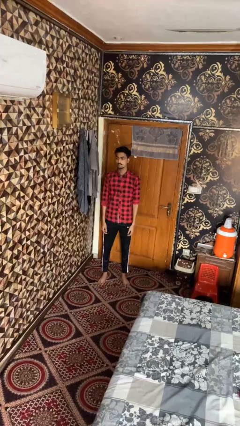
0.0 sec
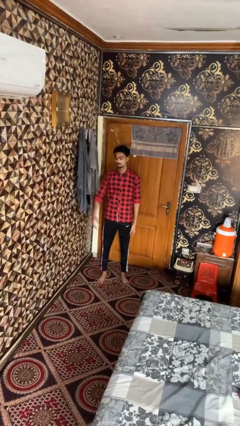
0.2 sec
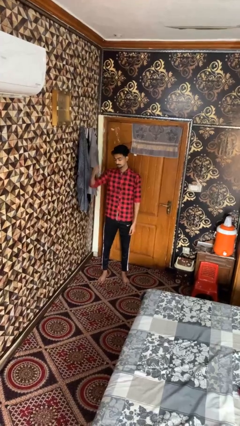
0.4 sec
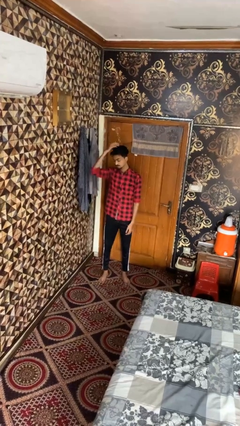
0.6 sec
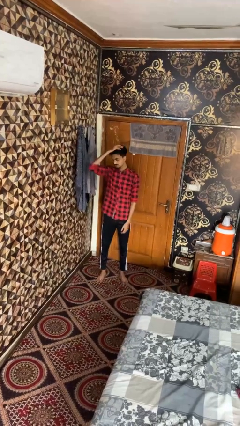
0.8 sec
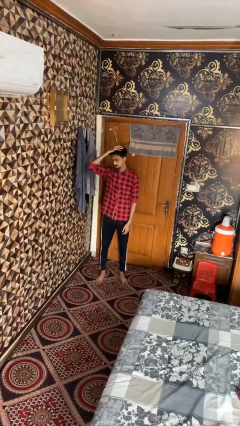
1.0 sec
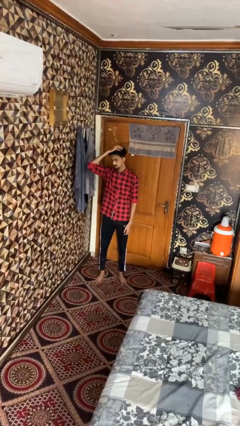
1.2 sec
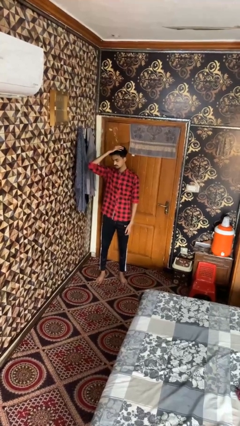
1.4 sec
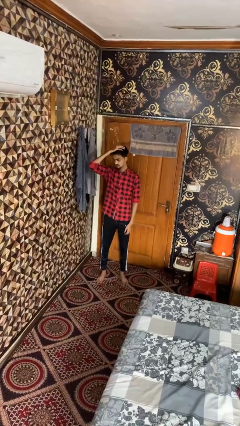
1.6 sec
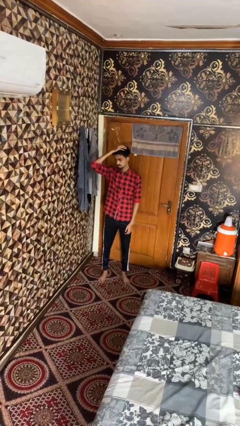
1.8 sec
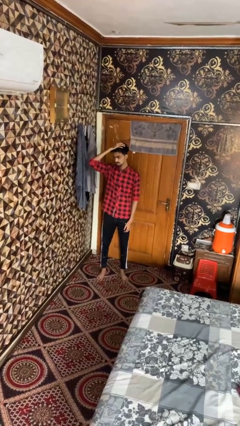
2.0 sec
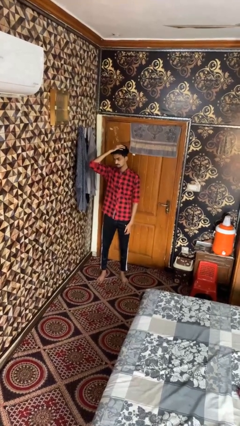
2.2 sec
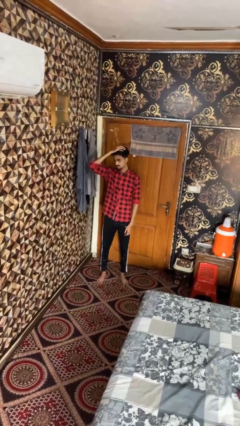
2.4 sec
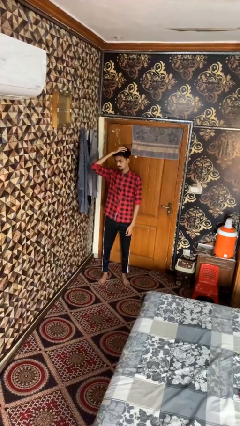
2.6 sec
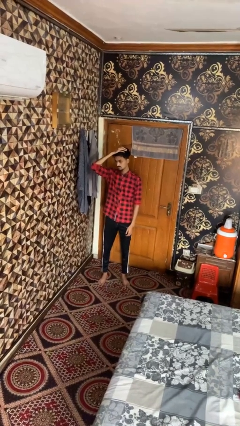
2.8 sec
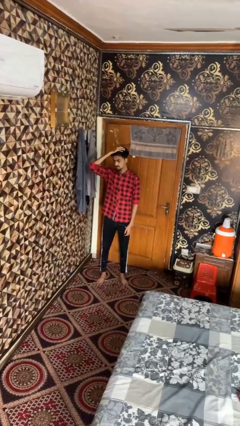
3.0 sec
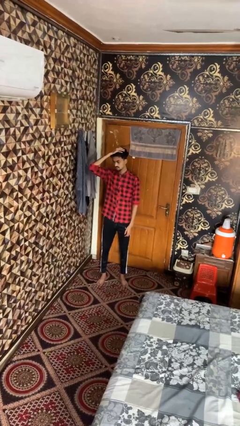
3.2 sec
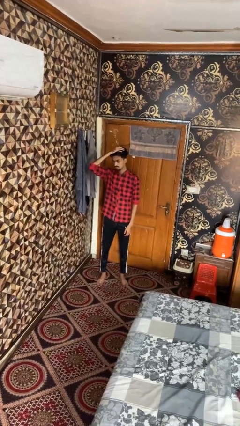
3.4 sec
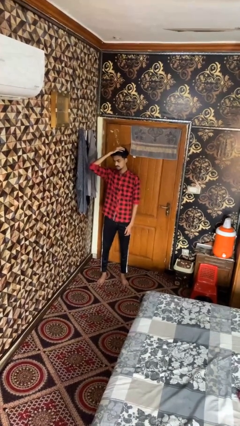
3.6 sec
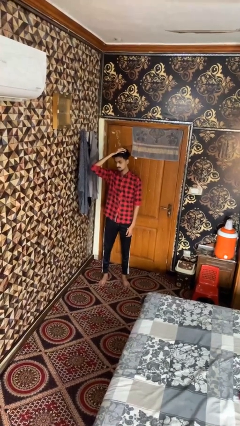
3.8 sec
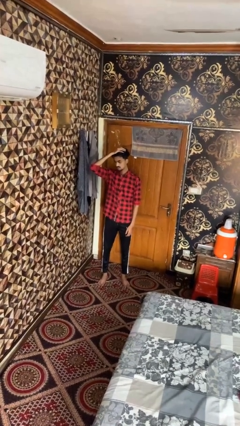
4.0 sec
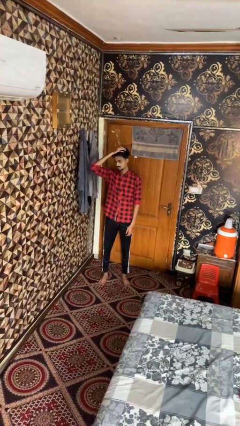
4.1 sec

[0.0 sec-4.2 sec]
person pats head

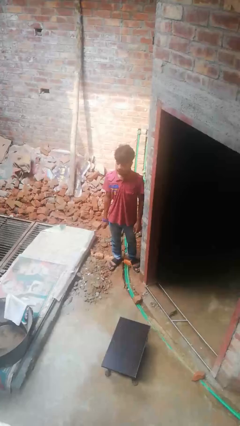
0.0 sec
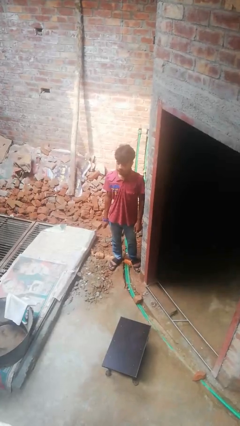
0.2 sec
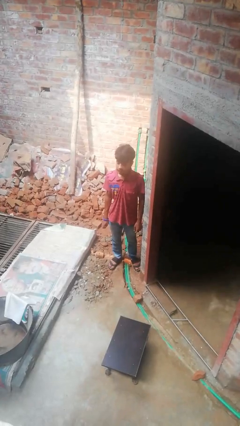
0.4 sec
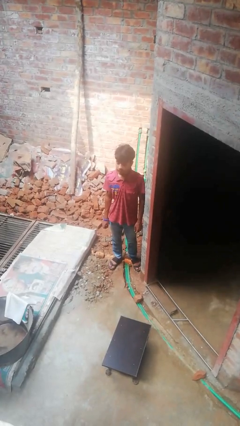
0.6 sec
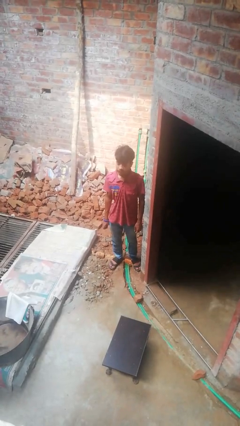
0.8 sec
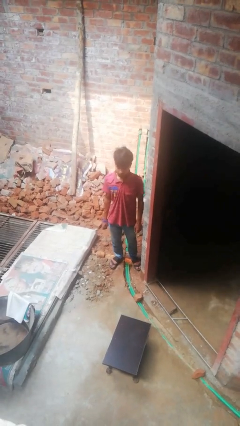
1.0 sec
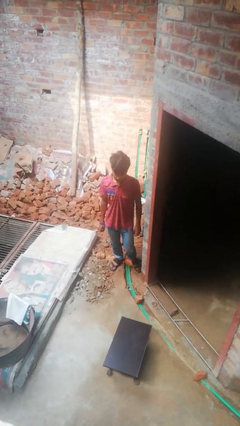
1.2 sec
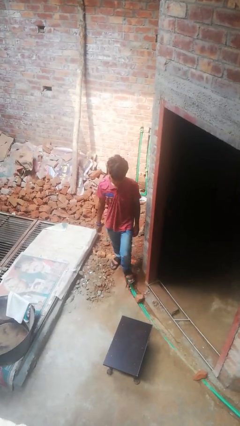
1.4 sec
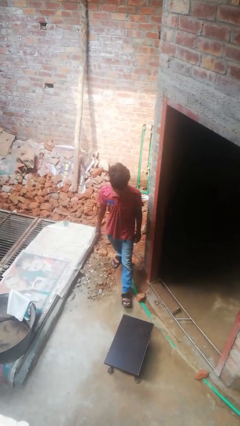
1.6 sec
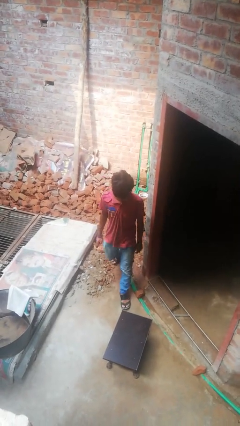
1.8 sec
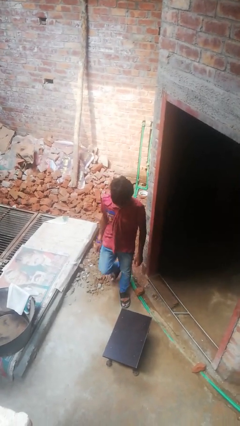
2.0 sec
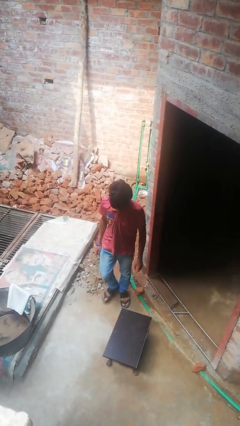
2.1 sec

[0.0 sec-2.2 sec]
person trips on object on floor

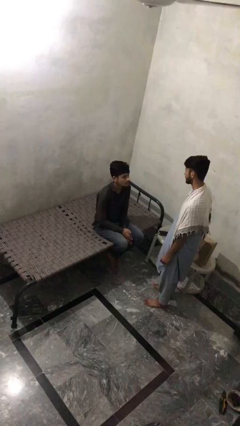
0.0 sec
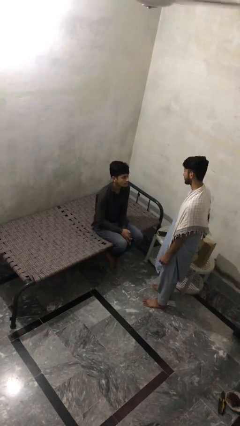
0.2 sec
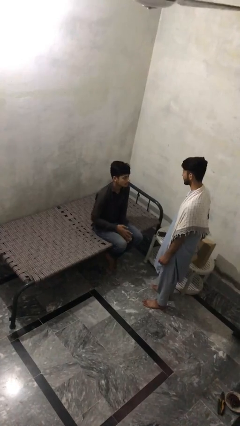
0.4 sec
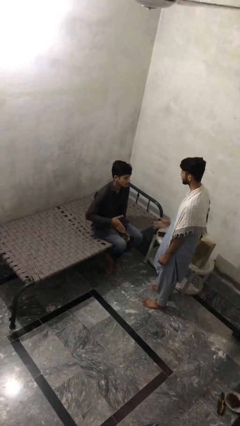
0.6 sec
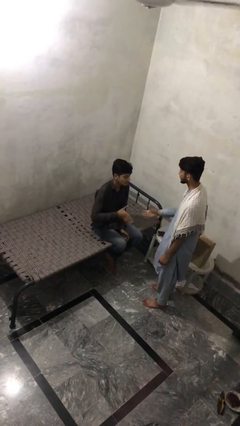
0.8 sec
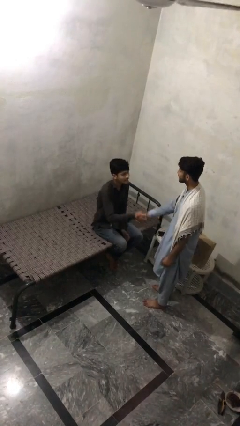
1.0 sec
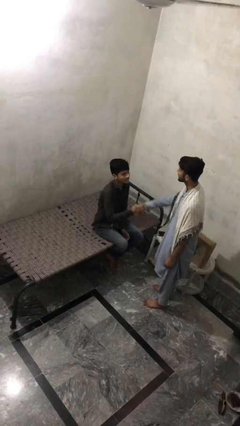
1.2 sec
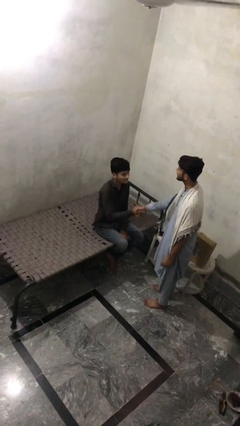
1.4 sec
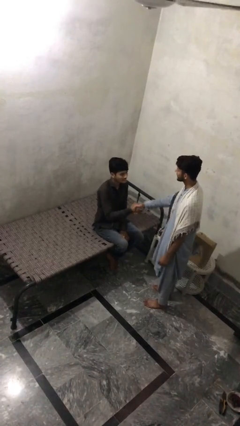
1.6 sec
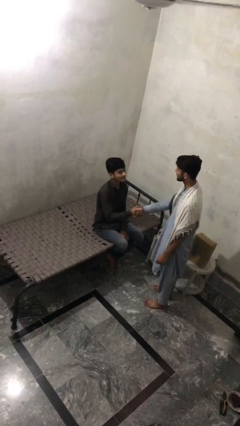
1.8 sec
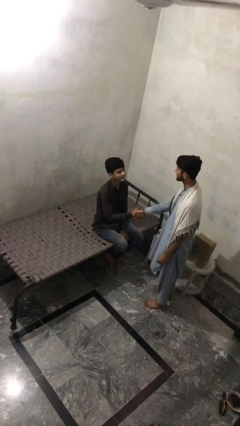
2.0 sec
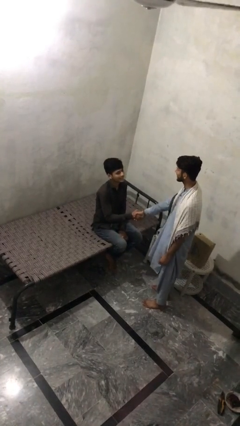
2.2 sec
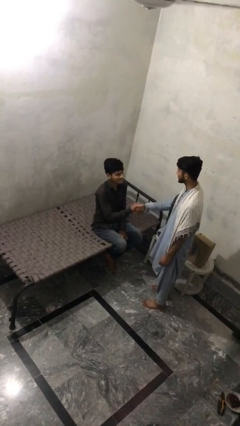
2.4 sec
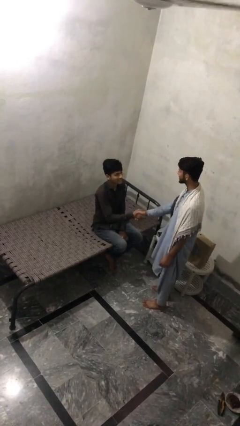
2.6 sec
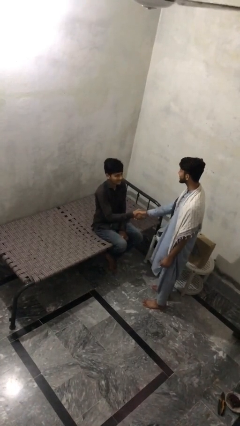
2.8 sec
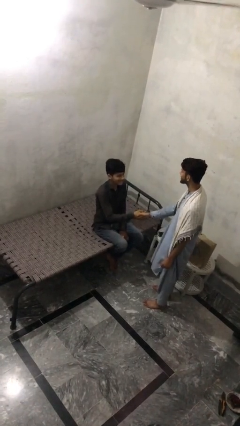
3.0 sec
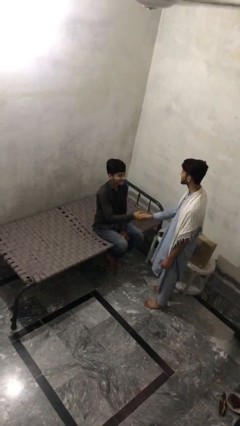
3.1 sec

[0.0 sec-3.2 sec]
person shakes hand

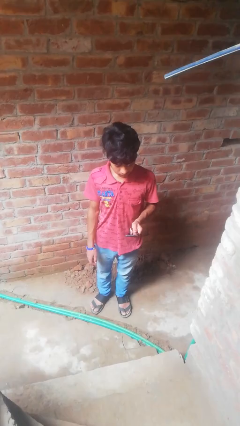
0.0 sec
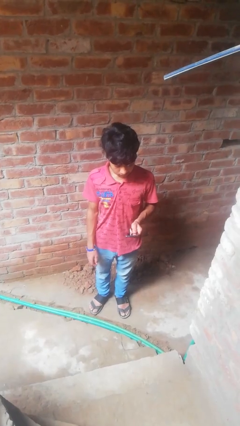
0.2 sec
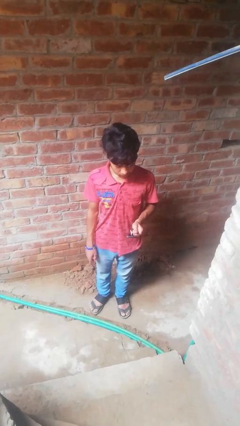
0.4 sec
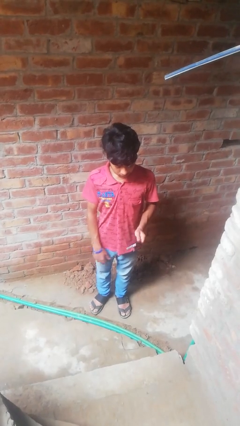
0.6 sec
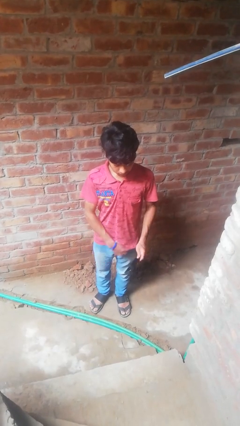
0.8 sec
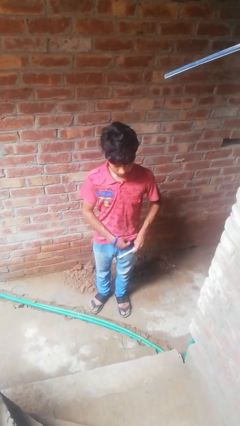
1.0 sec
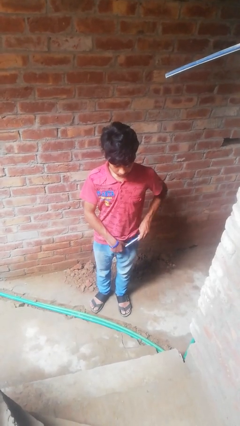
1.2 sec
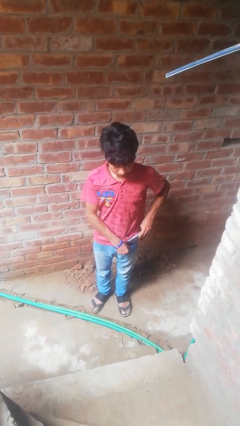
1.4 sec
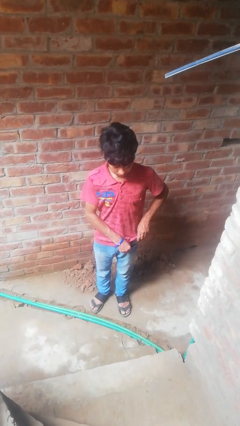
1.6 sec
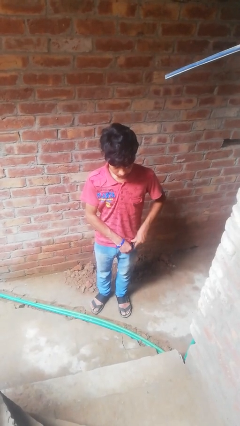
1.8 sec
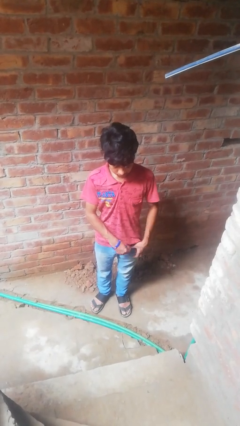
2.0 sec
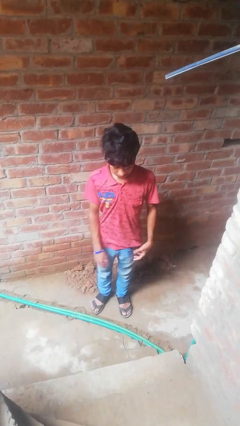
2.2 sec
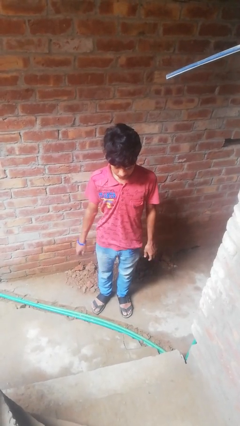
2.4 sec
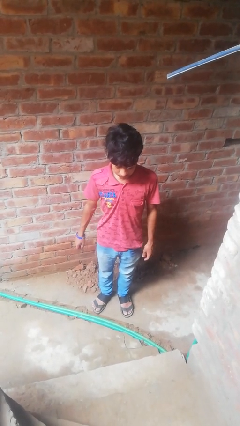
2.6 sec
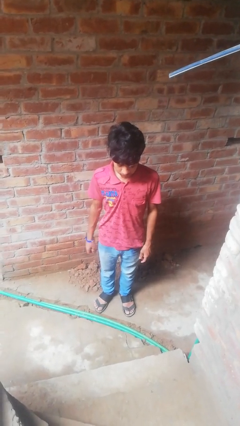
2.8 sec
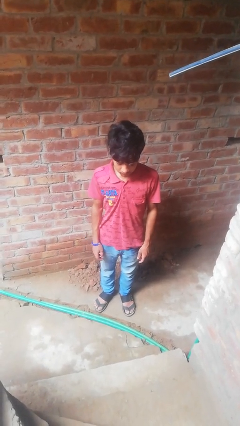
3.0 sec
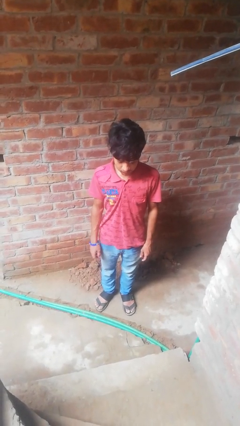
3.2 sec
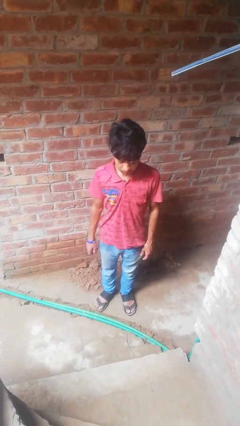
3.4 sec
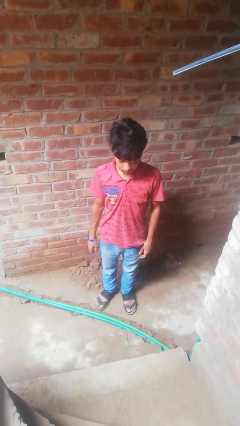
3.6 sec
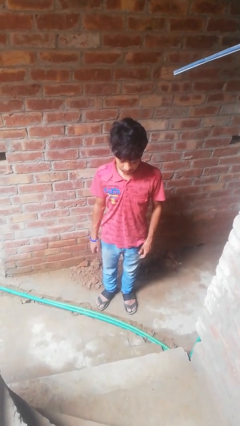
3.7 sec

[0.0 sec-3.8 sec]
person puts phone into pocket

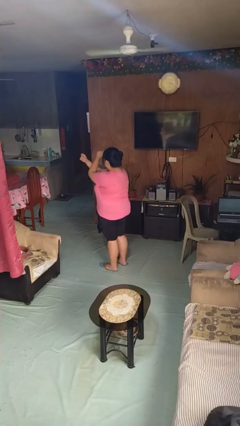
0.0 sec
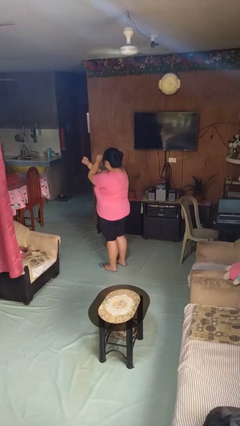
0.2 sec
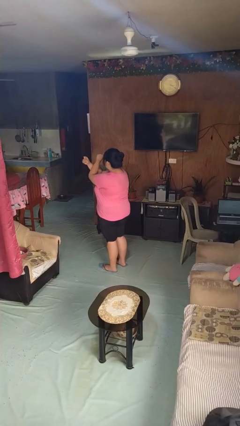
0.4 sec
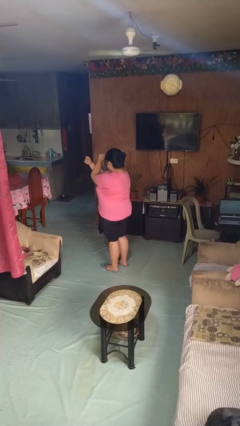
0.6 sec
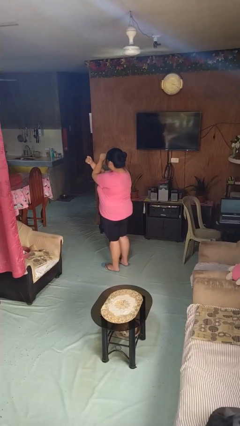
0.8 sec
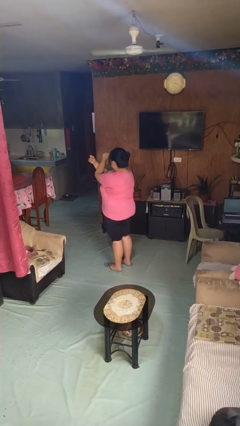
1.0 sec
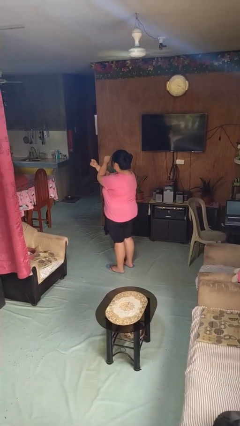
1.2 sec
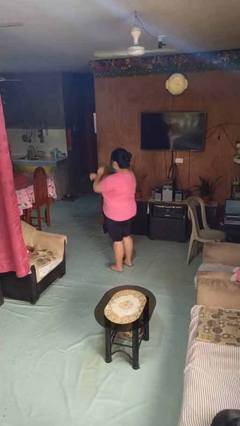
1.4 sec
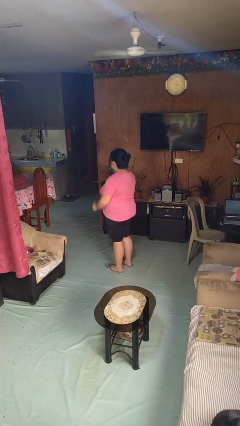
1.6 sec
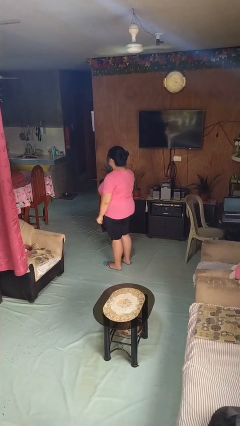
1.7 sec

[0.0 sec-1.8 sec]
person gestures arms x

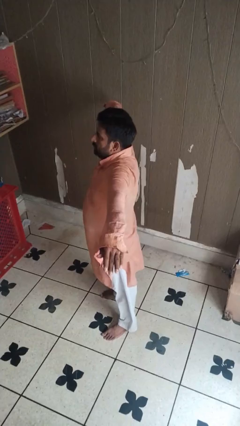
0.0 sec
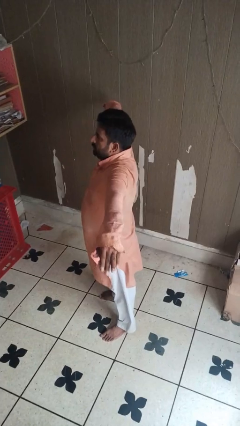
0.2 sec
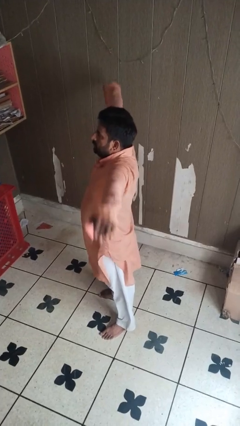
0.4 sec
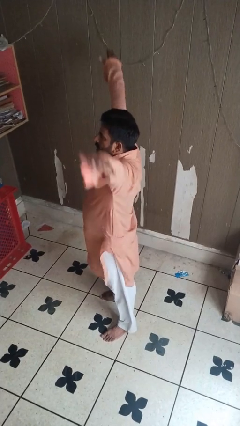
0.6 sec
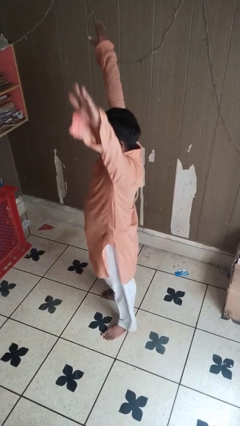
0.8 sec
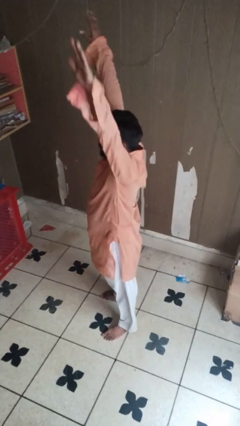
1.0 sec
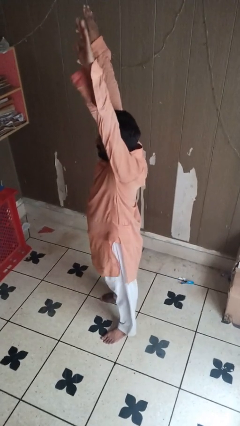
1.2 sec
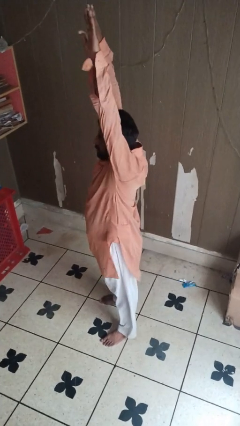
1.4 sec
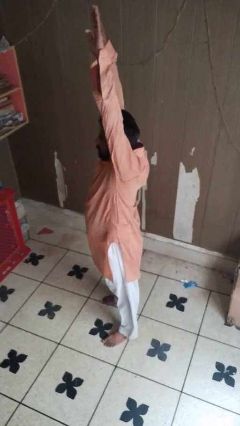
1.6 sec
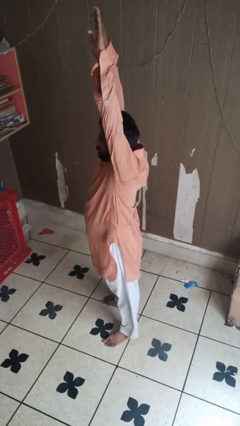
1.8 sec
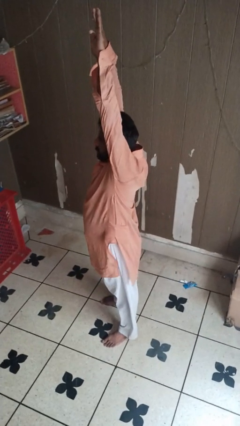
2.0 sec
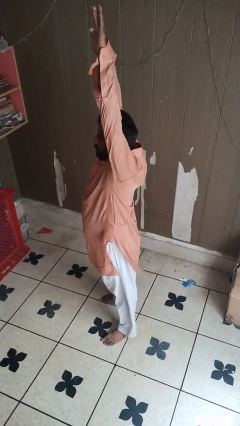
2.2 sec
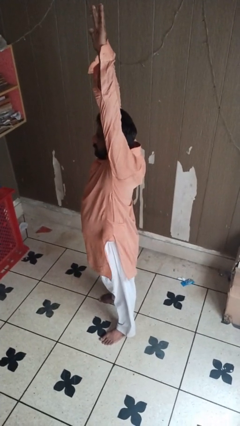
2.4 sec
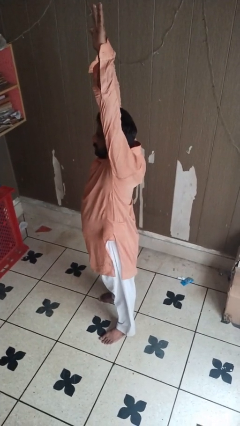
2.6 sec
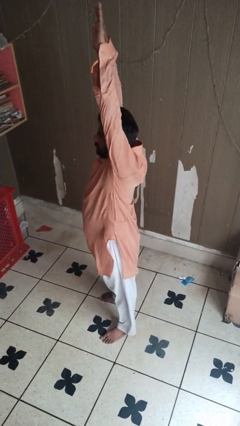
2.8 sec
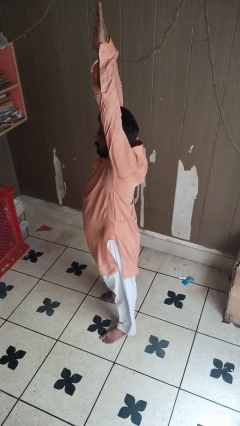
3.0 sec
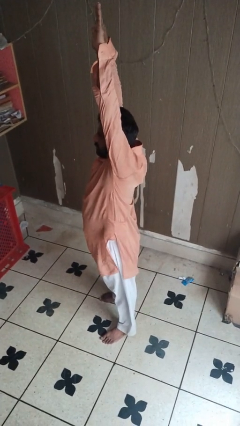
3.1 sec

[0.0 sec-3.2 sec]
person stretches arms over head
